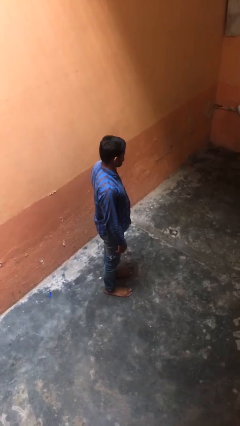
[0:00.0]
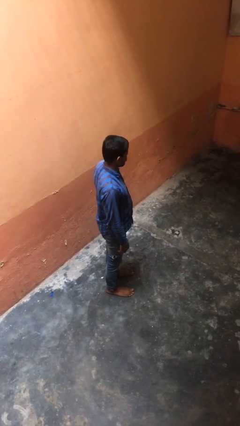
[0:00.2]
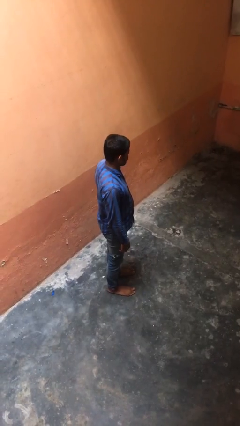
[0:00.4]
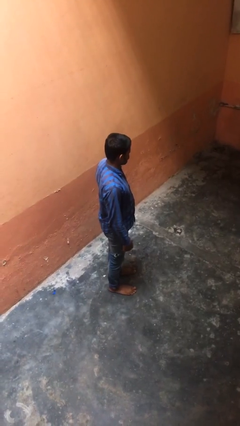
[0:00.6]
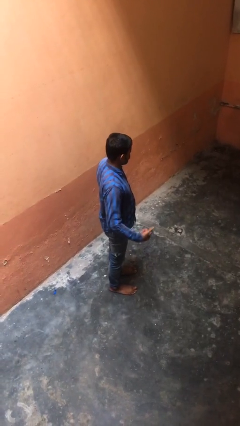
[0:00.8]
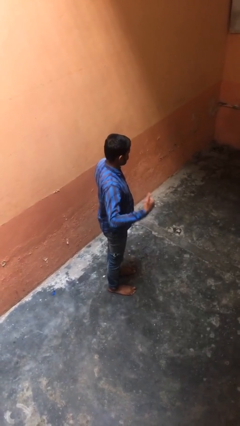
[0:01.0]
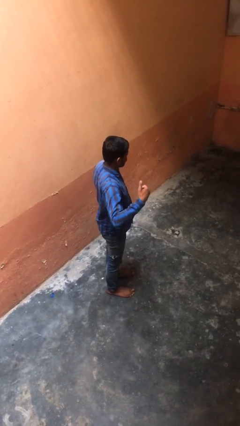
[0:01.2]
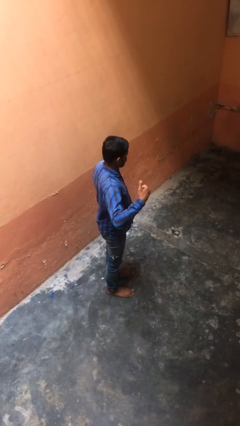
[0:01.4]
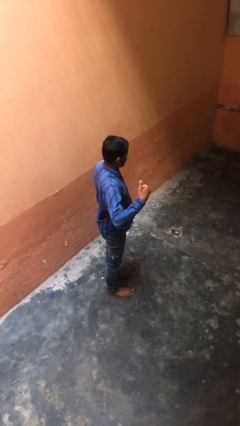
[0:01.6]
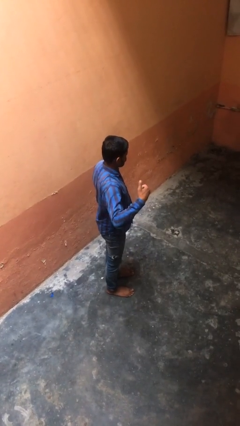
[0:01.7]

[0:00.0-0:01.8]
person gestures hang loose

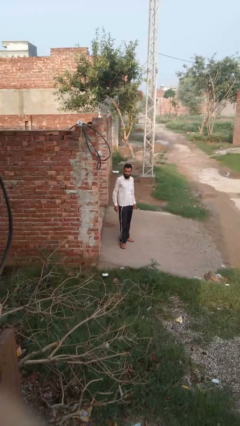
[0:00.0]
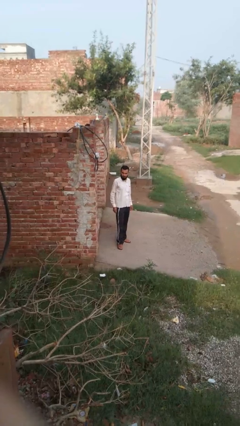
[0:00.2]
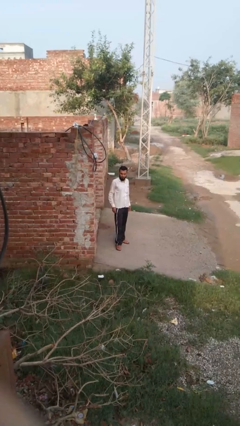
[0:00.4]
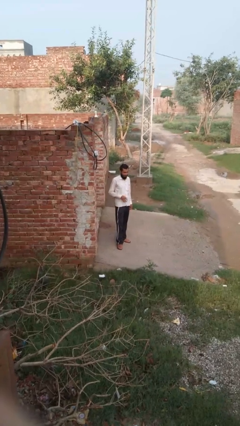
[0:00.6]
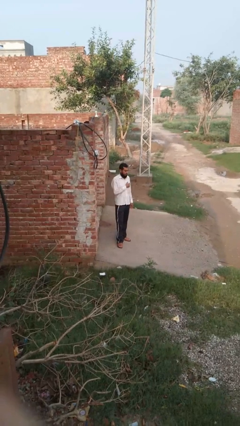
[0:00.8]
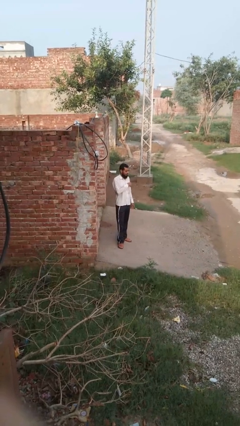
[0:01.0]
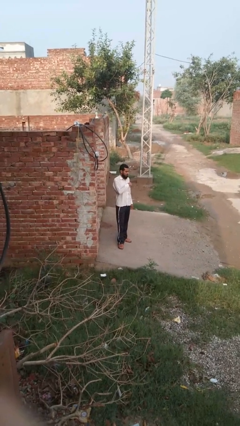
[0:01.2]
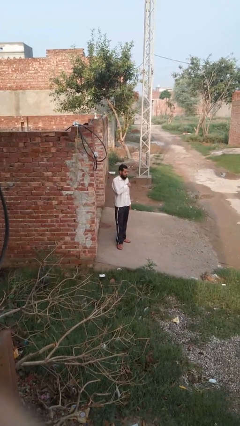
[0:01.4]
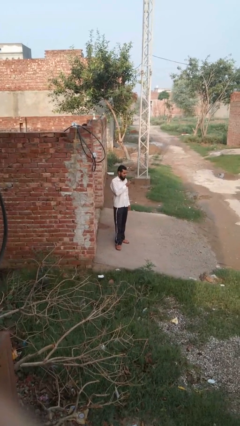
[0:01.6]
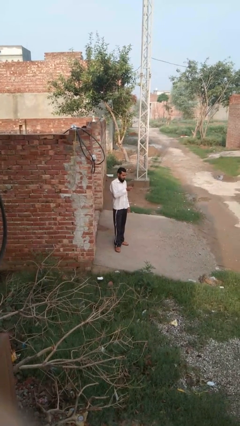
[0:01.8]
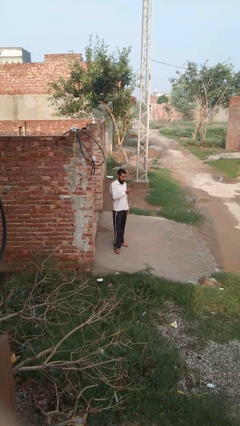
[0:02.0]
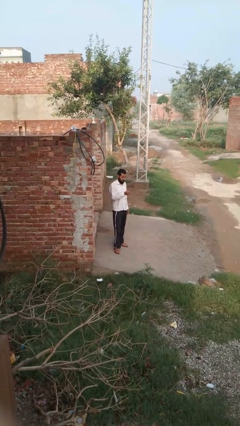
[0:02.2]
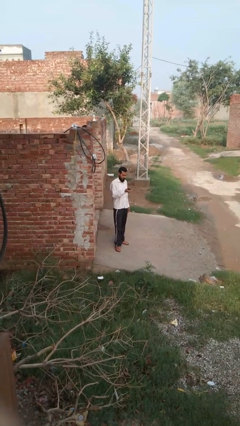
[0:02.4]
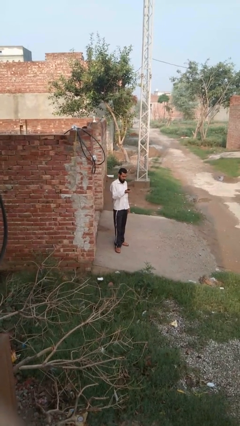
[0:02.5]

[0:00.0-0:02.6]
person takes phone from pocket

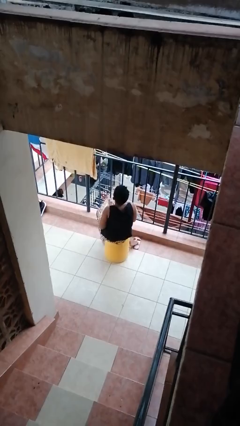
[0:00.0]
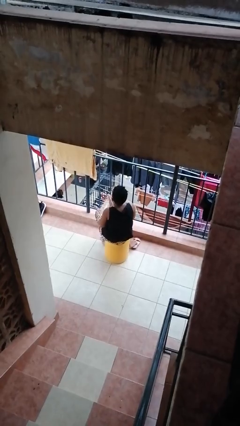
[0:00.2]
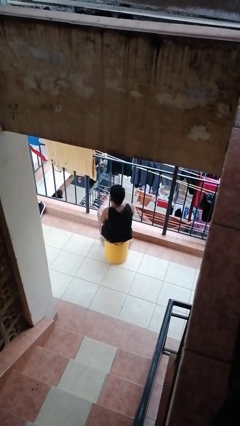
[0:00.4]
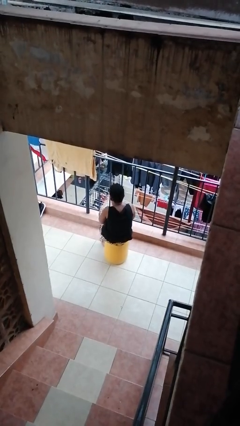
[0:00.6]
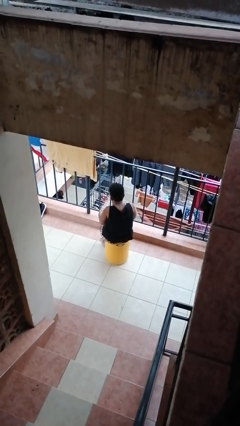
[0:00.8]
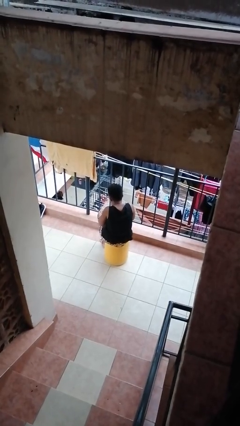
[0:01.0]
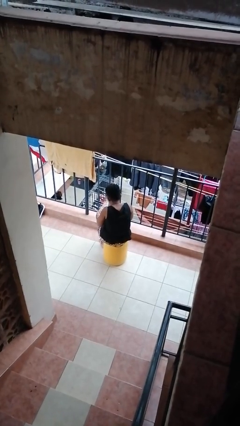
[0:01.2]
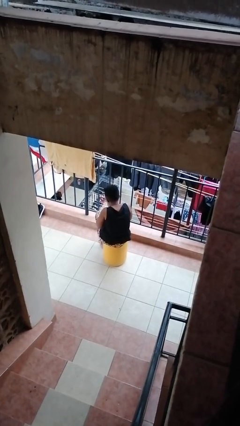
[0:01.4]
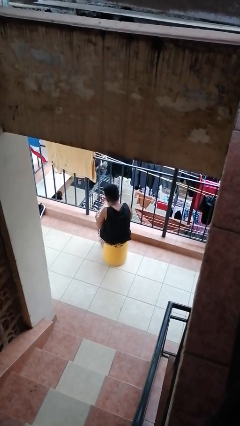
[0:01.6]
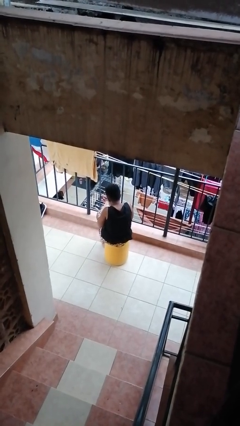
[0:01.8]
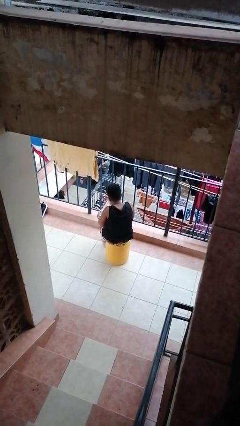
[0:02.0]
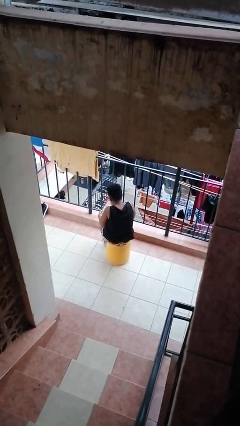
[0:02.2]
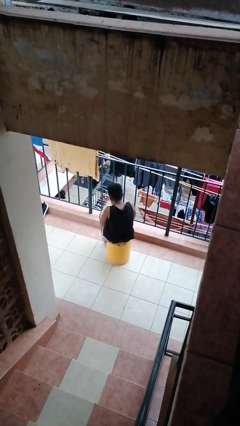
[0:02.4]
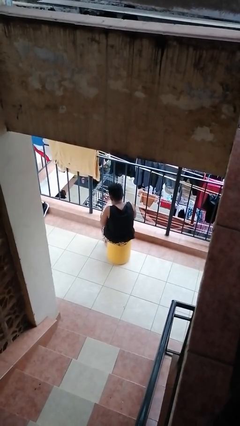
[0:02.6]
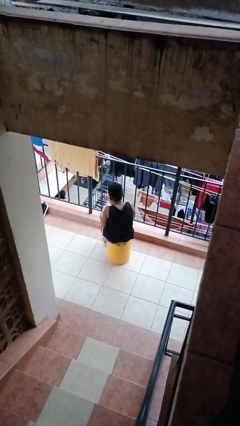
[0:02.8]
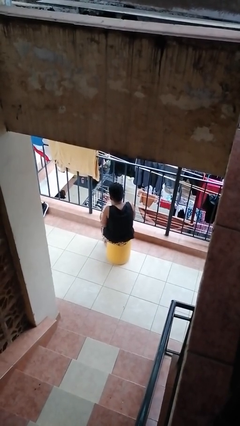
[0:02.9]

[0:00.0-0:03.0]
person blows into hands

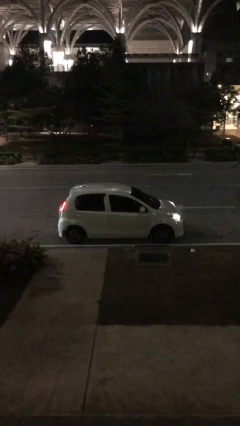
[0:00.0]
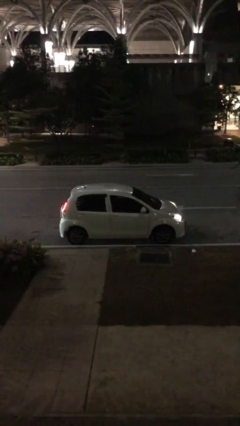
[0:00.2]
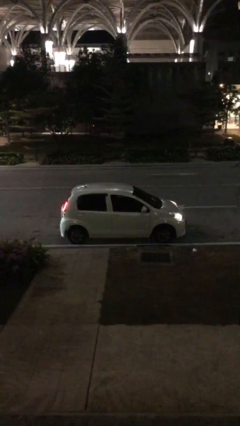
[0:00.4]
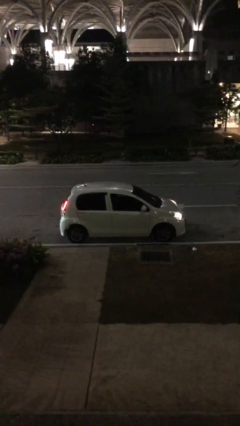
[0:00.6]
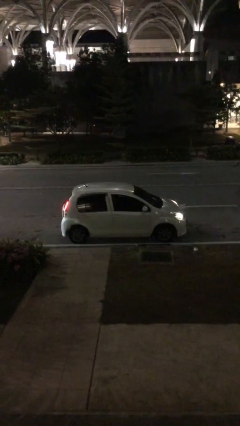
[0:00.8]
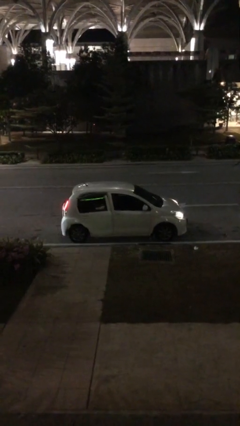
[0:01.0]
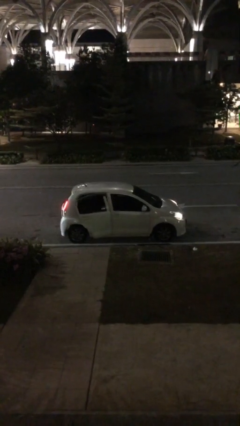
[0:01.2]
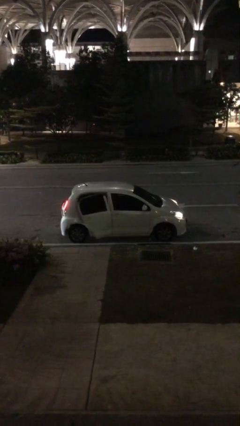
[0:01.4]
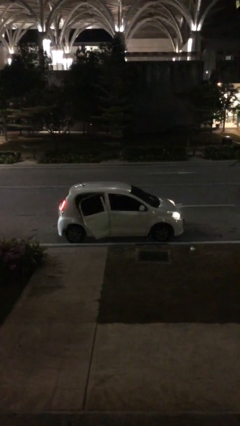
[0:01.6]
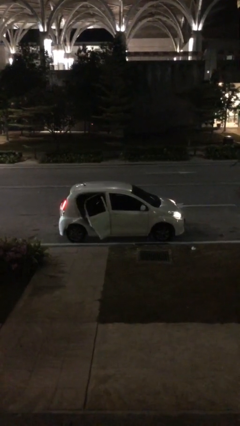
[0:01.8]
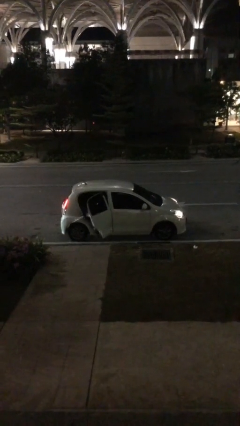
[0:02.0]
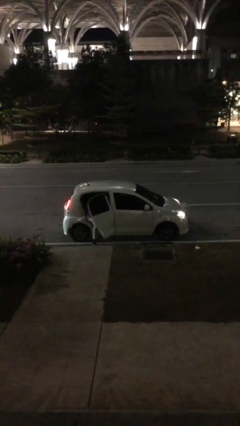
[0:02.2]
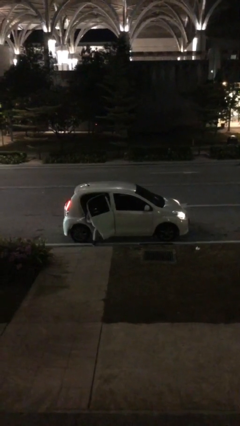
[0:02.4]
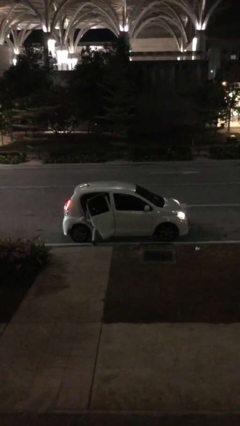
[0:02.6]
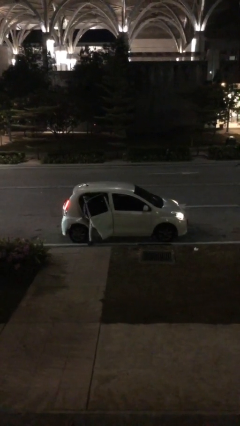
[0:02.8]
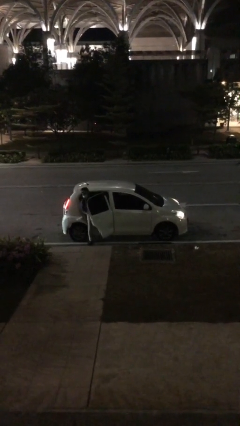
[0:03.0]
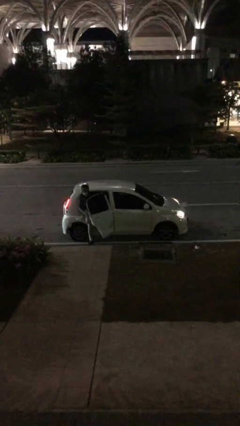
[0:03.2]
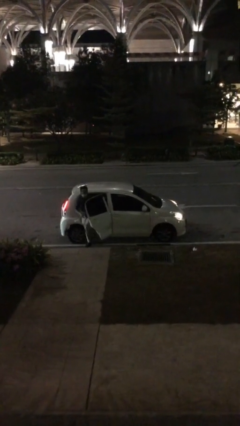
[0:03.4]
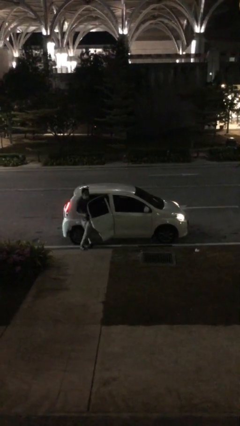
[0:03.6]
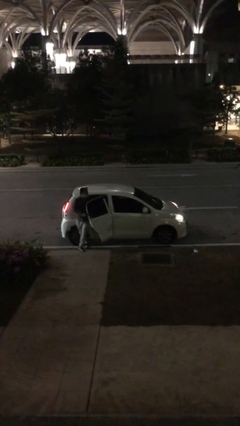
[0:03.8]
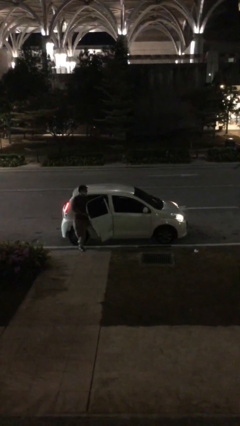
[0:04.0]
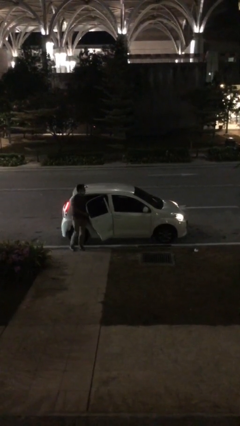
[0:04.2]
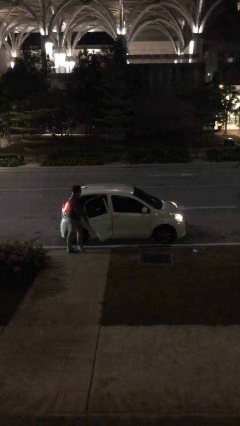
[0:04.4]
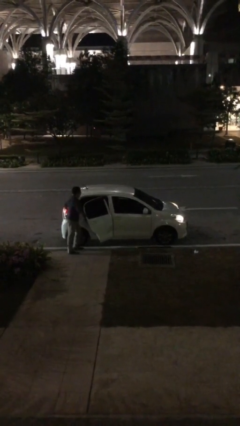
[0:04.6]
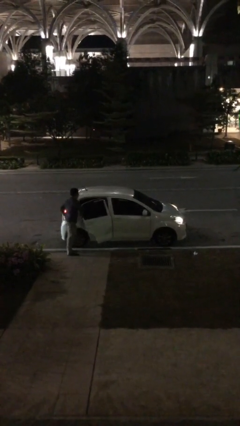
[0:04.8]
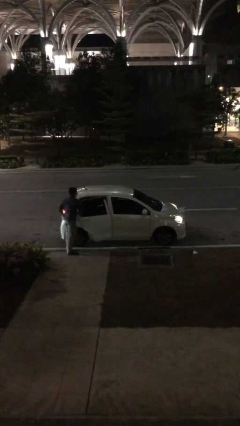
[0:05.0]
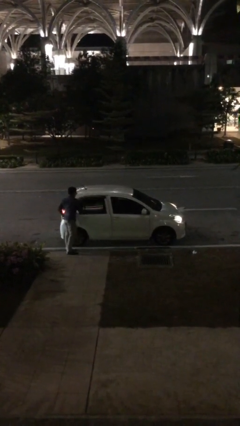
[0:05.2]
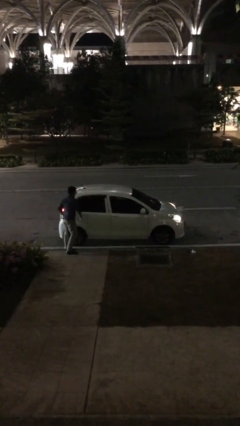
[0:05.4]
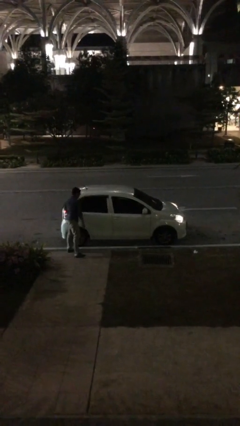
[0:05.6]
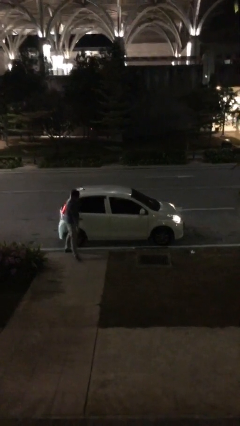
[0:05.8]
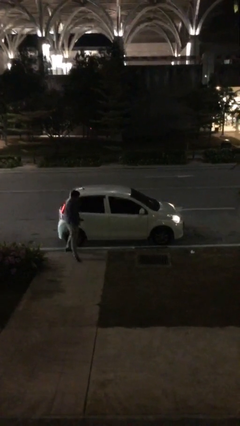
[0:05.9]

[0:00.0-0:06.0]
car drops off person

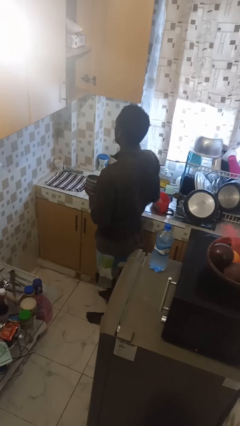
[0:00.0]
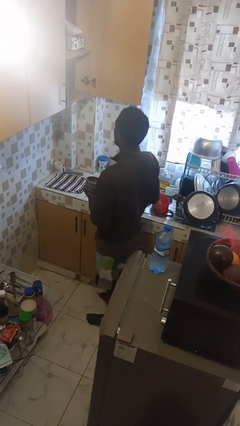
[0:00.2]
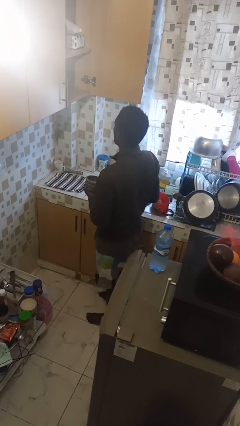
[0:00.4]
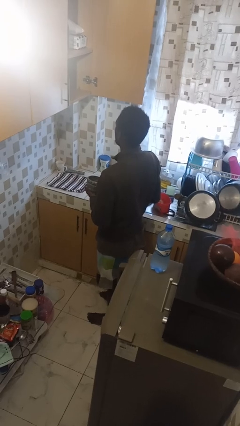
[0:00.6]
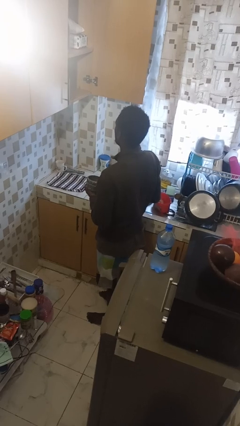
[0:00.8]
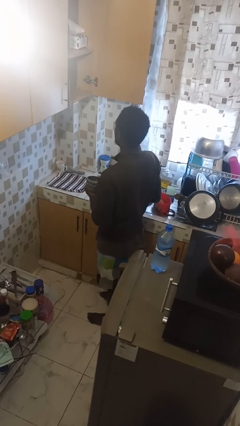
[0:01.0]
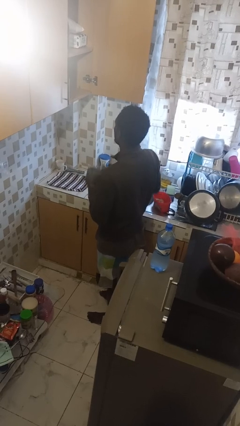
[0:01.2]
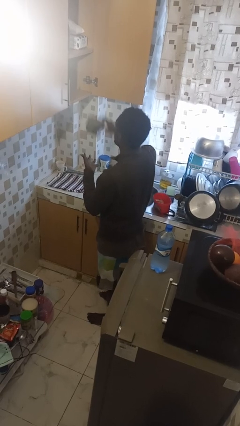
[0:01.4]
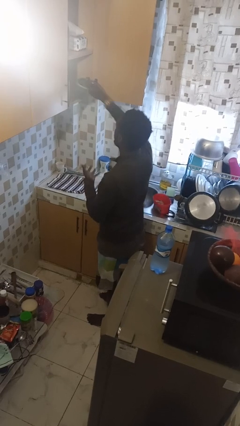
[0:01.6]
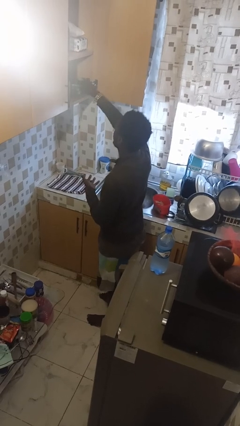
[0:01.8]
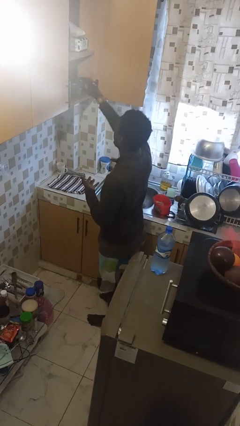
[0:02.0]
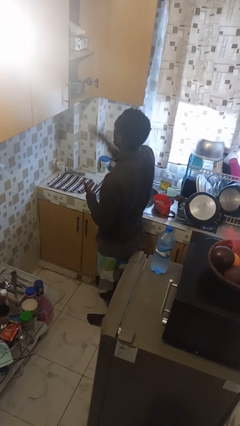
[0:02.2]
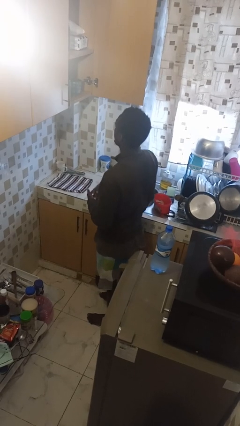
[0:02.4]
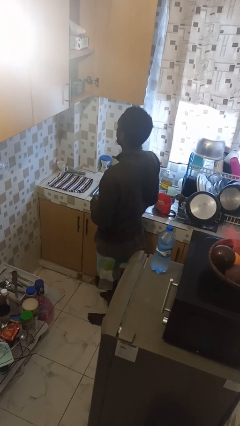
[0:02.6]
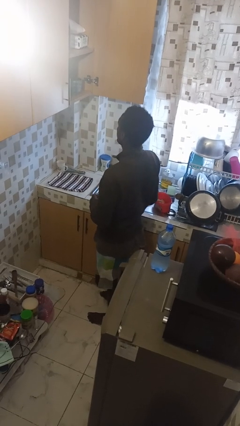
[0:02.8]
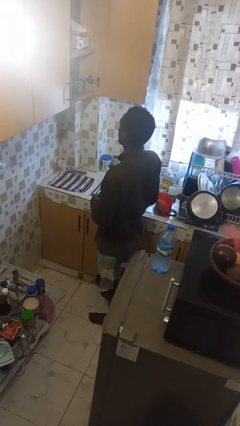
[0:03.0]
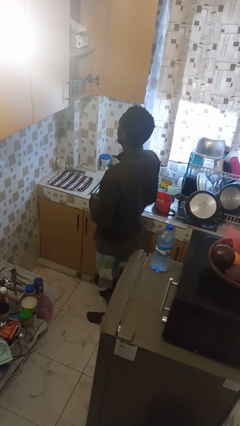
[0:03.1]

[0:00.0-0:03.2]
person puts down object into cabinet

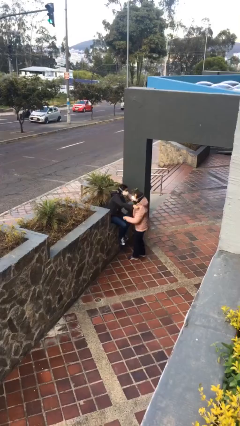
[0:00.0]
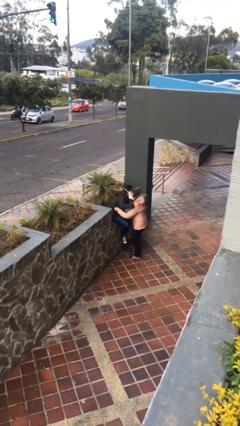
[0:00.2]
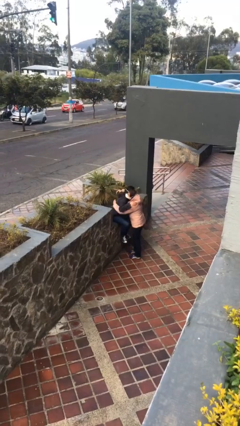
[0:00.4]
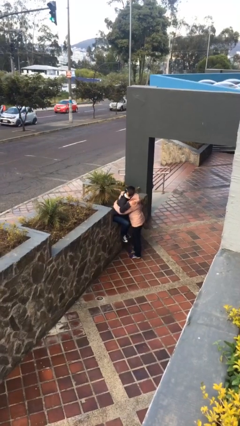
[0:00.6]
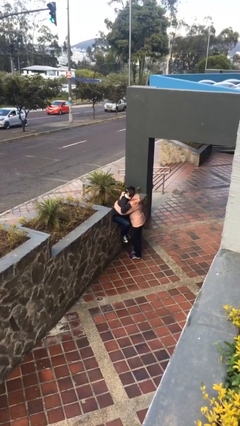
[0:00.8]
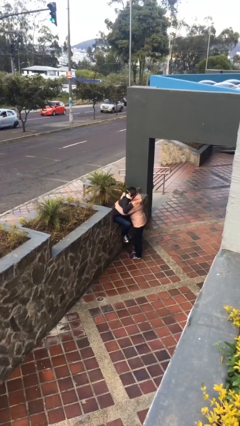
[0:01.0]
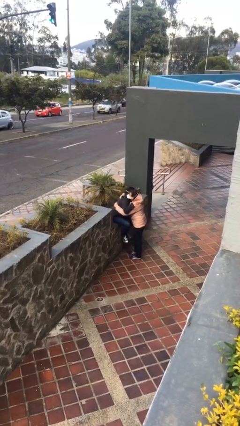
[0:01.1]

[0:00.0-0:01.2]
person embraces person
